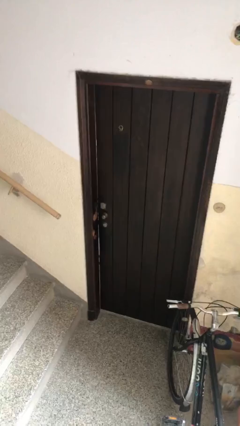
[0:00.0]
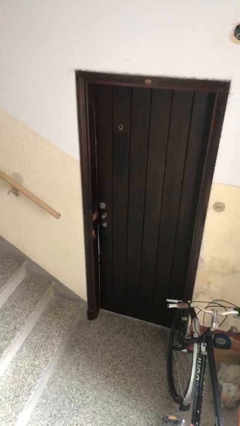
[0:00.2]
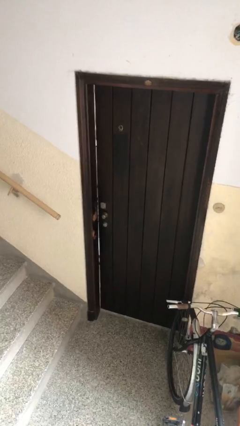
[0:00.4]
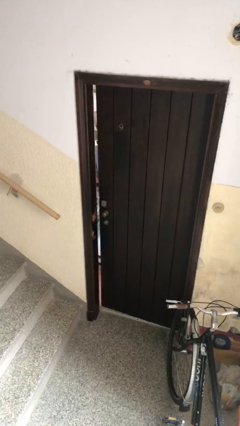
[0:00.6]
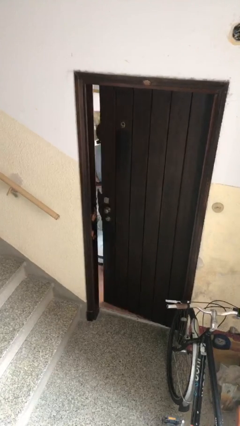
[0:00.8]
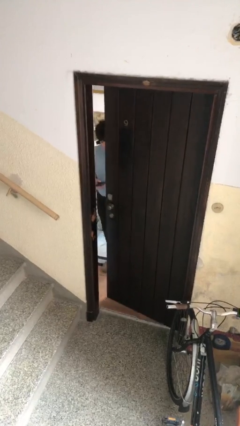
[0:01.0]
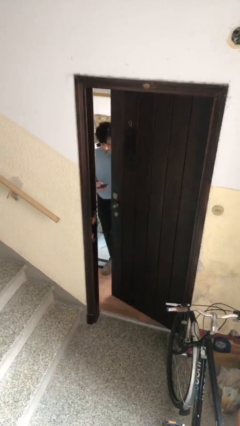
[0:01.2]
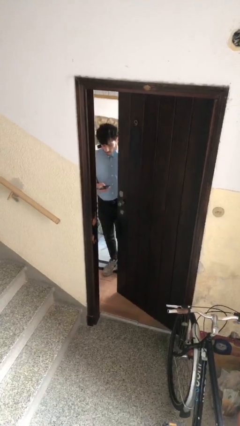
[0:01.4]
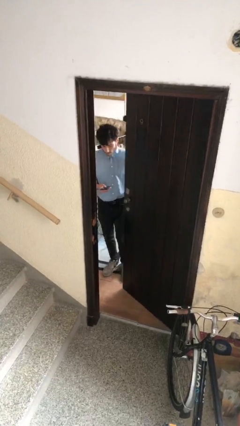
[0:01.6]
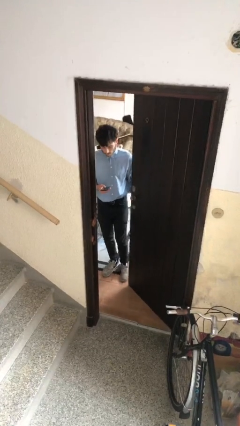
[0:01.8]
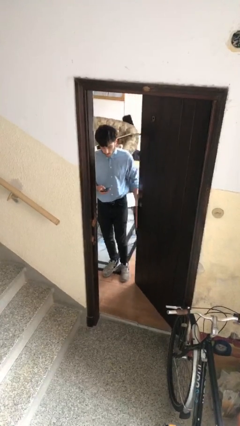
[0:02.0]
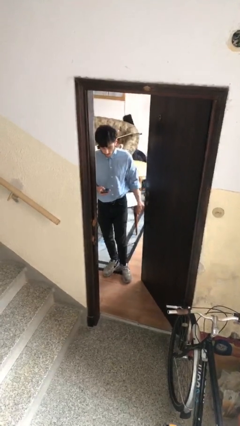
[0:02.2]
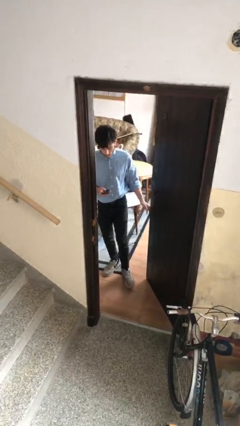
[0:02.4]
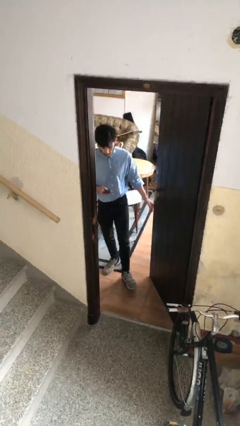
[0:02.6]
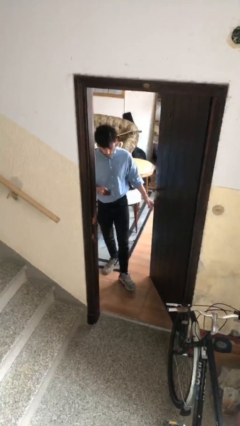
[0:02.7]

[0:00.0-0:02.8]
person opens facility door

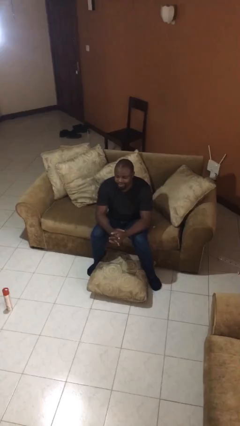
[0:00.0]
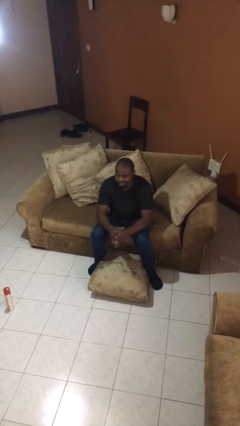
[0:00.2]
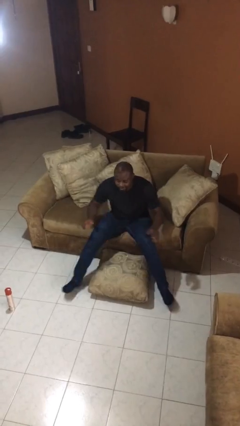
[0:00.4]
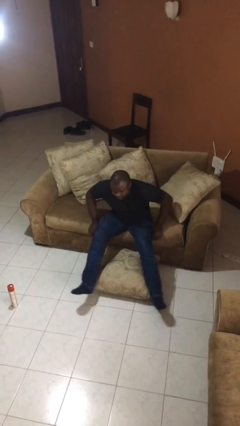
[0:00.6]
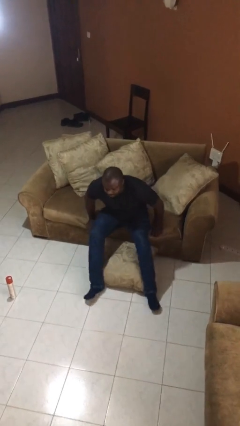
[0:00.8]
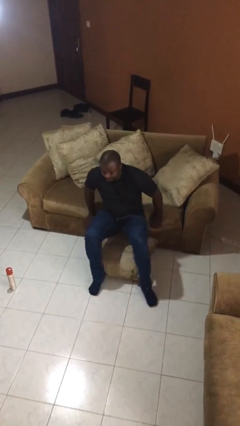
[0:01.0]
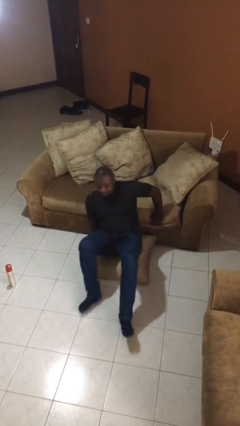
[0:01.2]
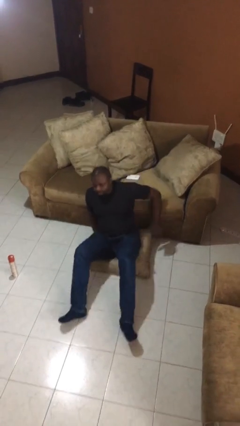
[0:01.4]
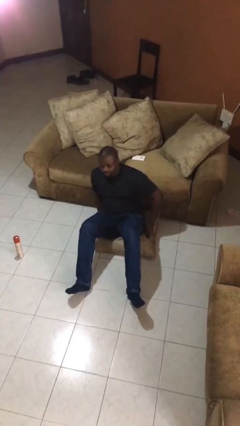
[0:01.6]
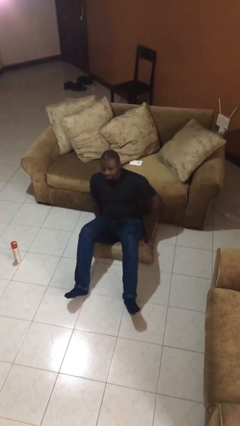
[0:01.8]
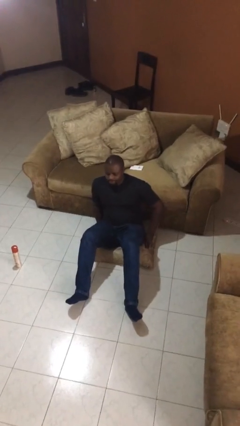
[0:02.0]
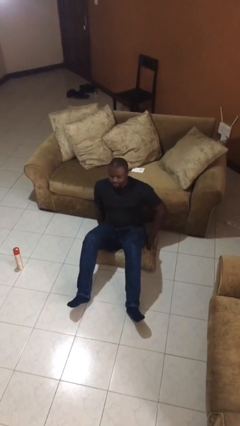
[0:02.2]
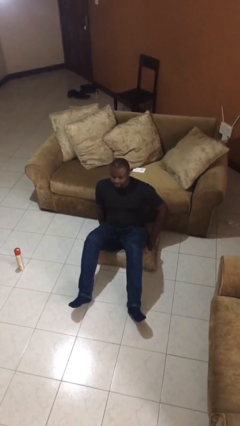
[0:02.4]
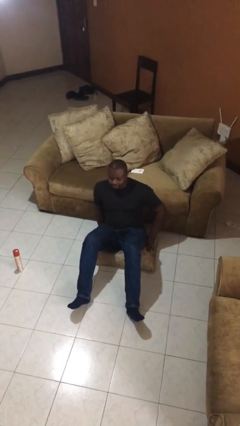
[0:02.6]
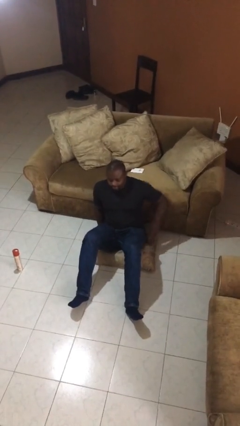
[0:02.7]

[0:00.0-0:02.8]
person falls from chair

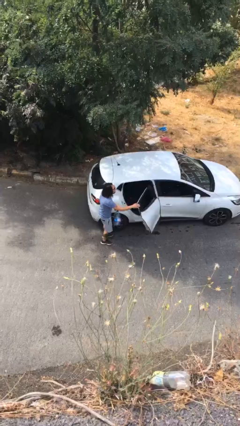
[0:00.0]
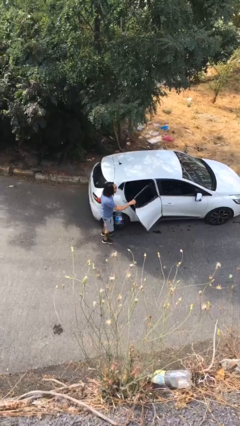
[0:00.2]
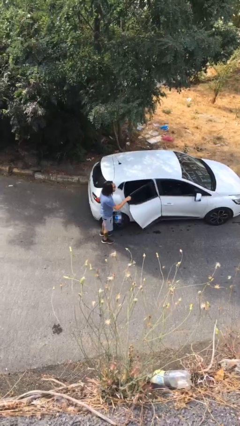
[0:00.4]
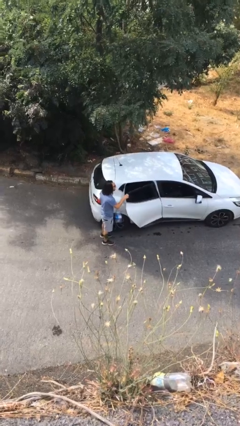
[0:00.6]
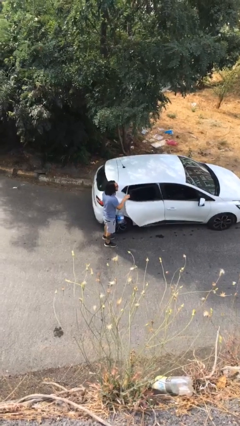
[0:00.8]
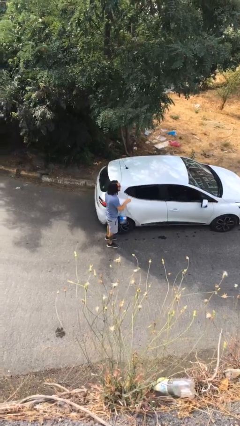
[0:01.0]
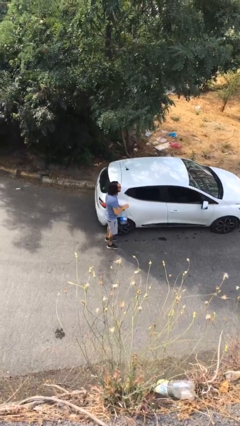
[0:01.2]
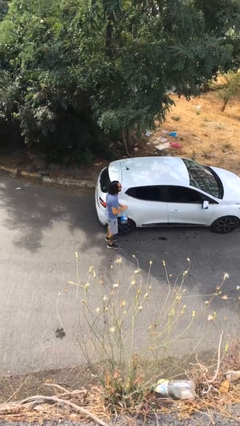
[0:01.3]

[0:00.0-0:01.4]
person closes car door

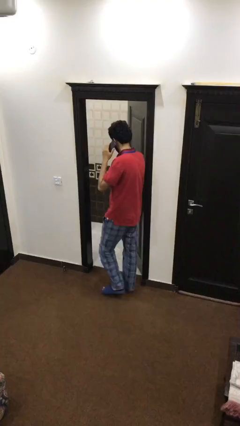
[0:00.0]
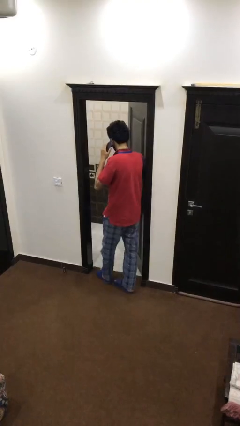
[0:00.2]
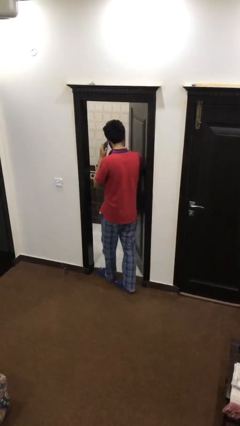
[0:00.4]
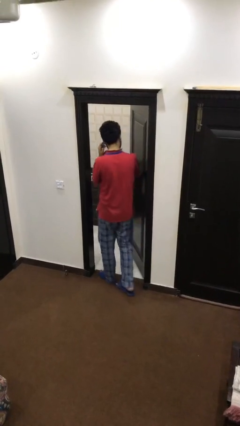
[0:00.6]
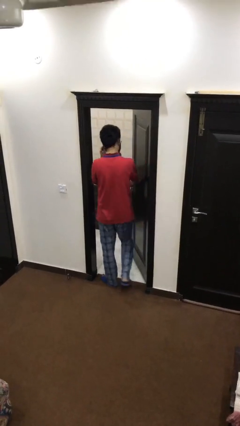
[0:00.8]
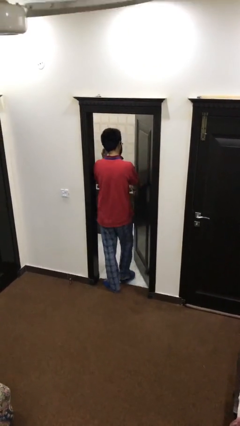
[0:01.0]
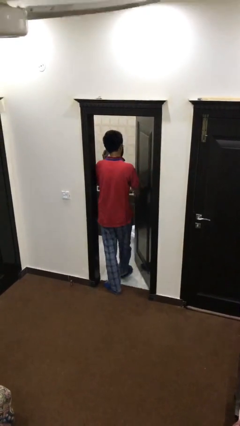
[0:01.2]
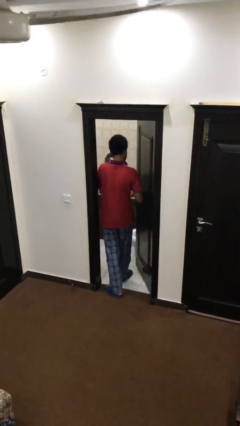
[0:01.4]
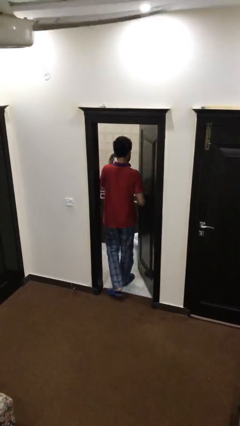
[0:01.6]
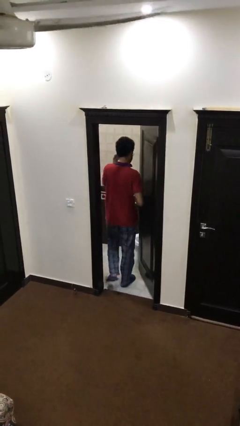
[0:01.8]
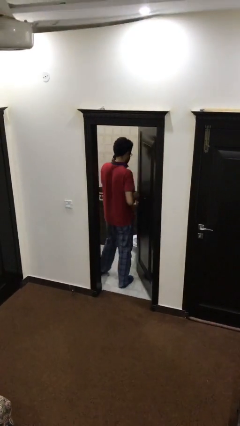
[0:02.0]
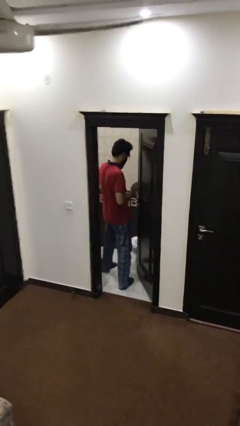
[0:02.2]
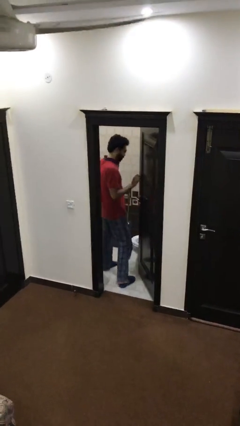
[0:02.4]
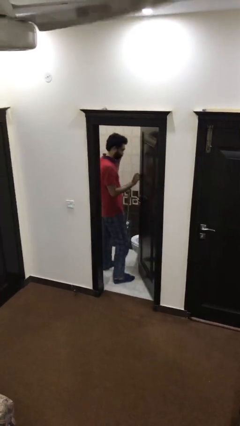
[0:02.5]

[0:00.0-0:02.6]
person exits scene through structure

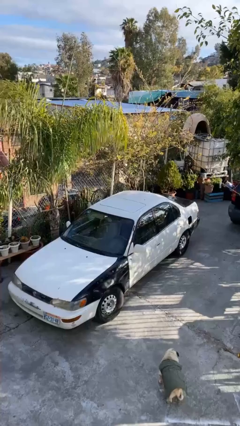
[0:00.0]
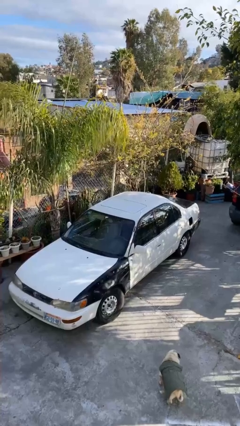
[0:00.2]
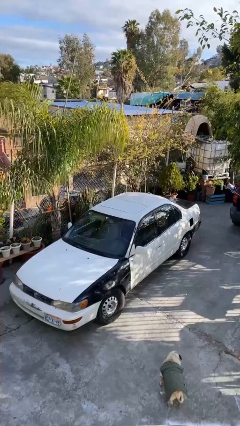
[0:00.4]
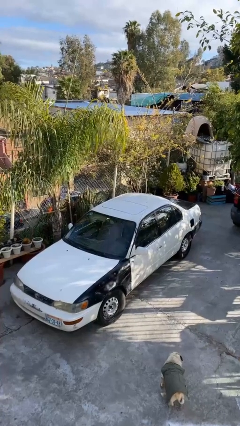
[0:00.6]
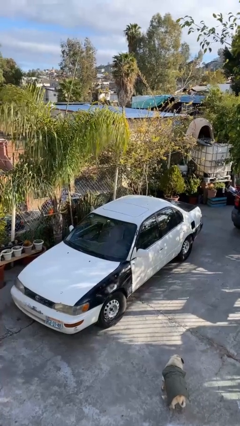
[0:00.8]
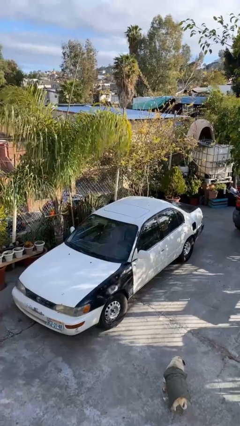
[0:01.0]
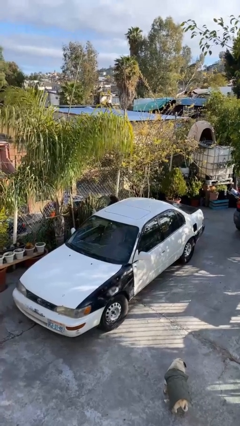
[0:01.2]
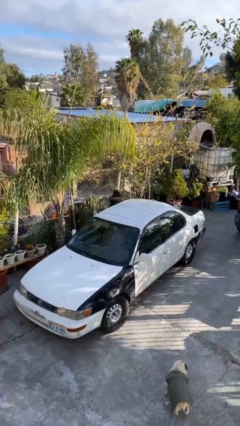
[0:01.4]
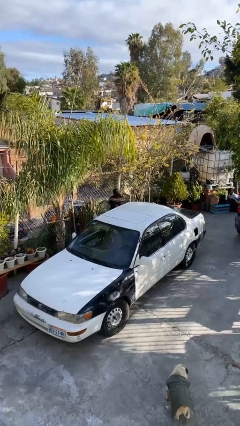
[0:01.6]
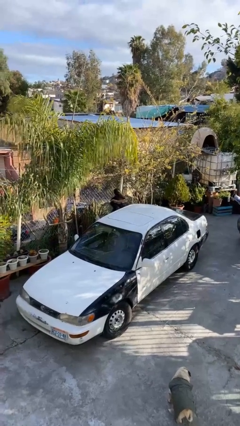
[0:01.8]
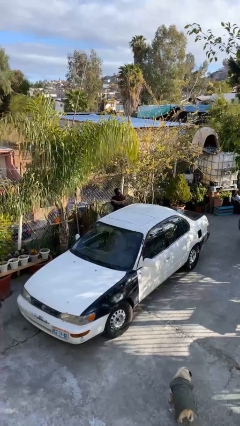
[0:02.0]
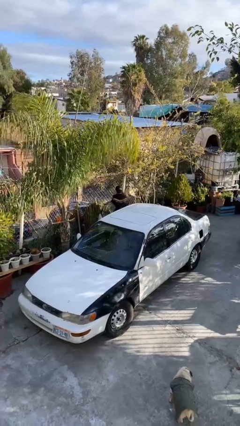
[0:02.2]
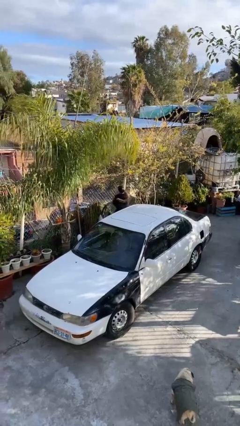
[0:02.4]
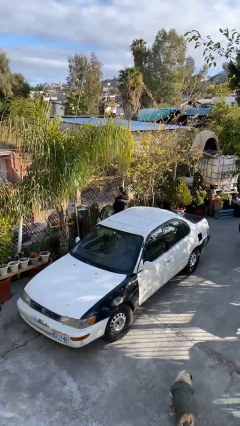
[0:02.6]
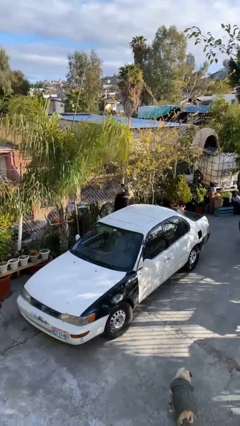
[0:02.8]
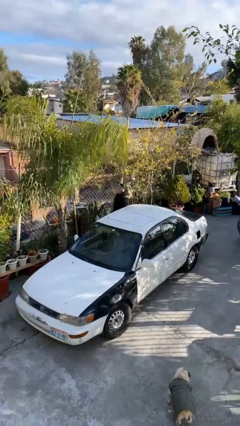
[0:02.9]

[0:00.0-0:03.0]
person exits car

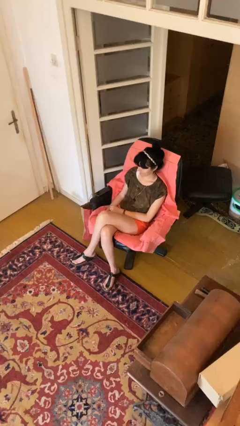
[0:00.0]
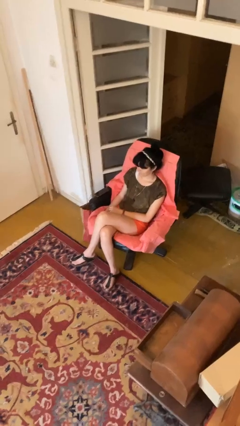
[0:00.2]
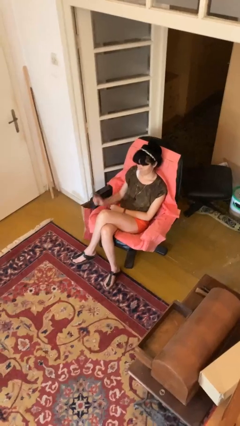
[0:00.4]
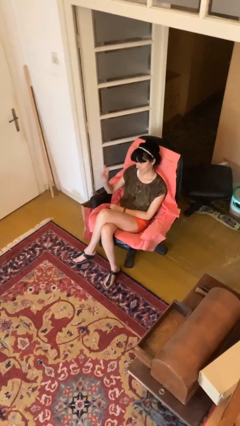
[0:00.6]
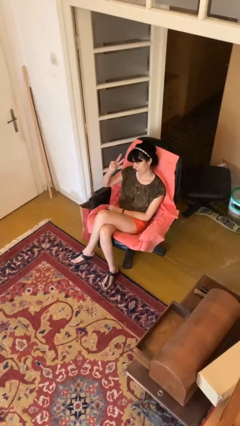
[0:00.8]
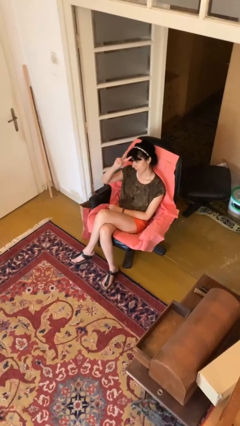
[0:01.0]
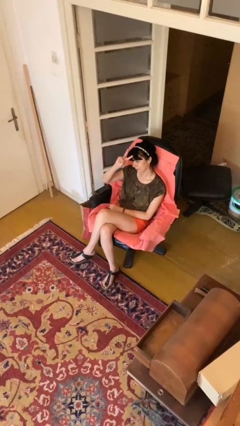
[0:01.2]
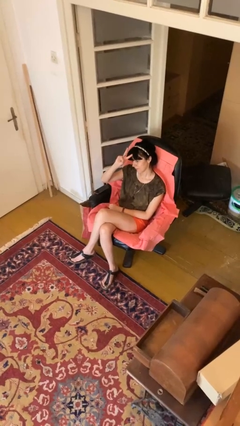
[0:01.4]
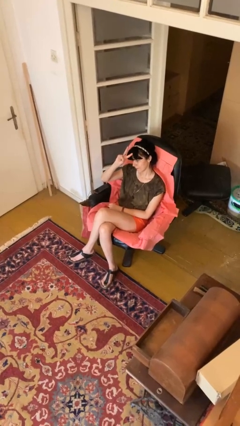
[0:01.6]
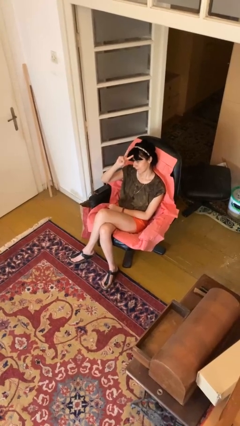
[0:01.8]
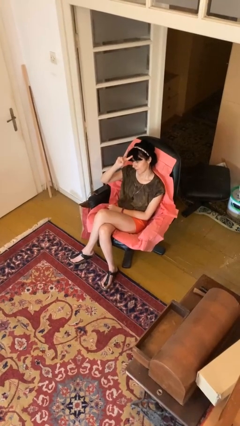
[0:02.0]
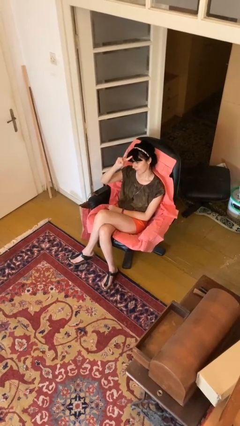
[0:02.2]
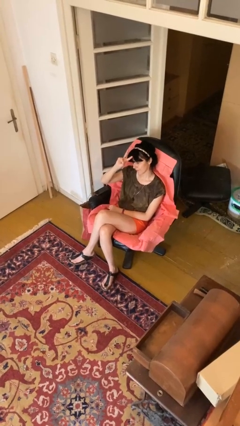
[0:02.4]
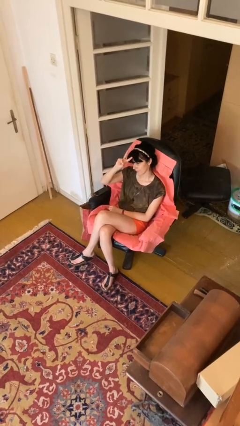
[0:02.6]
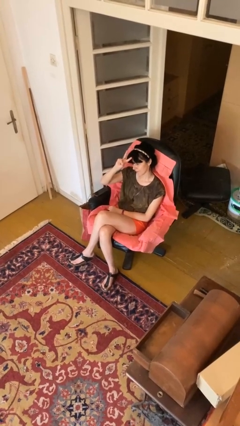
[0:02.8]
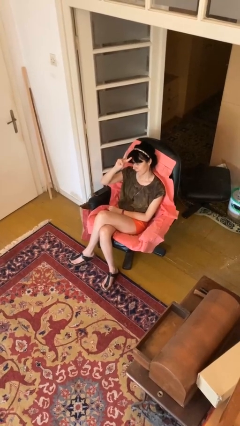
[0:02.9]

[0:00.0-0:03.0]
person gestures peace

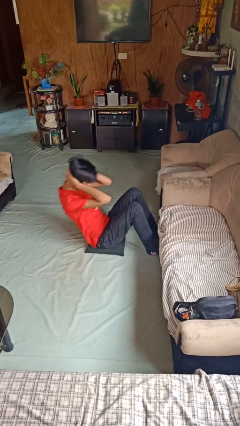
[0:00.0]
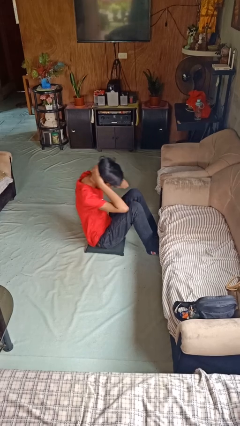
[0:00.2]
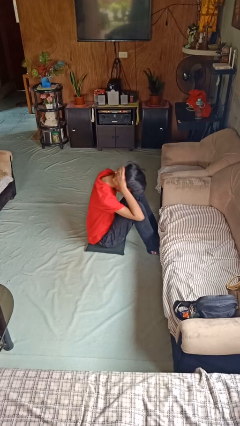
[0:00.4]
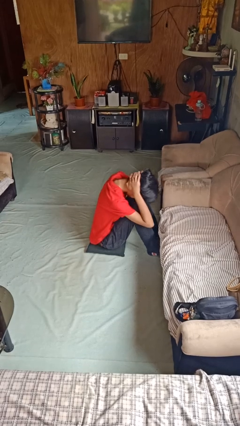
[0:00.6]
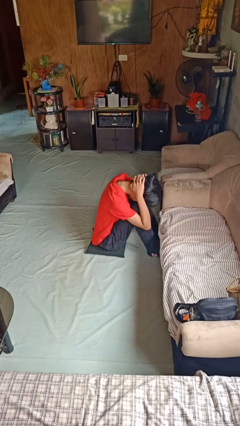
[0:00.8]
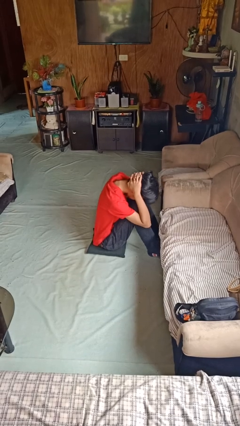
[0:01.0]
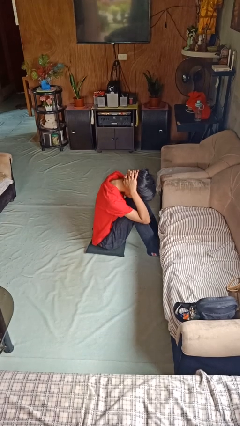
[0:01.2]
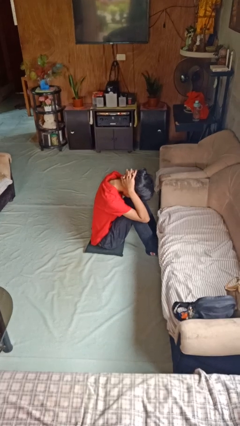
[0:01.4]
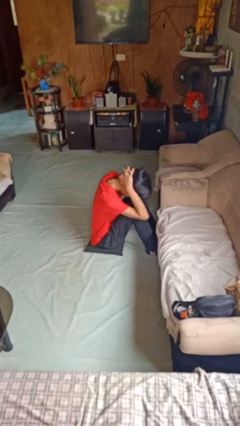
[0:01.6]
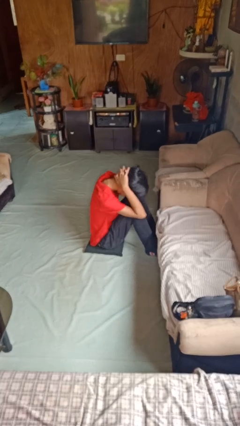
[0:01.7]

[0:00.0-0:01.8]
person exercises with situp
